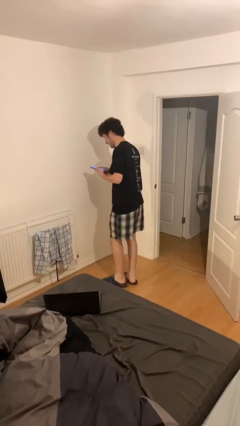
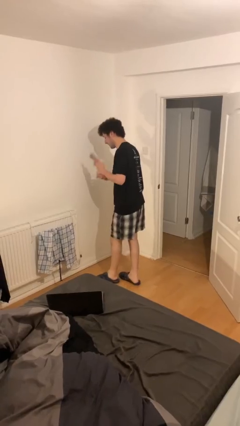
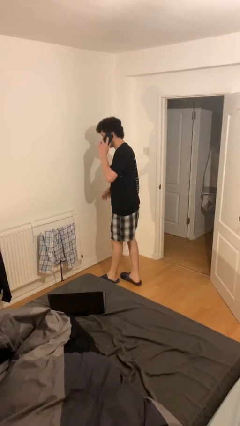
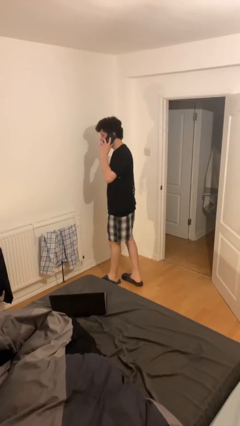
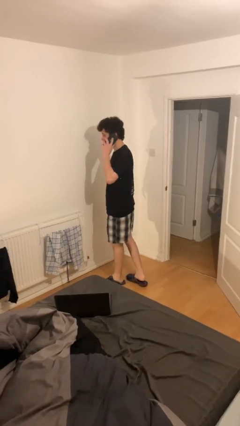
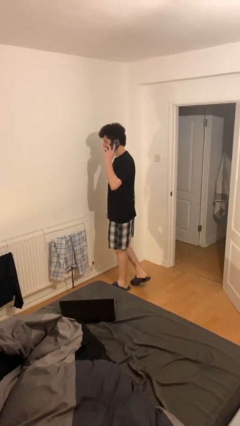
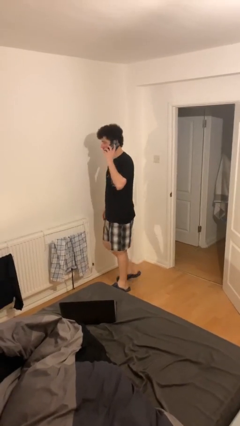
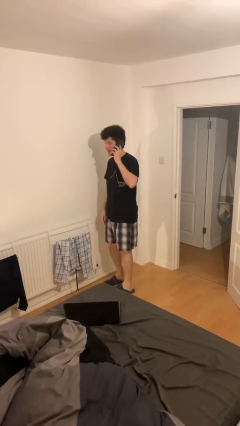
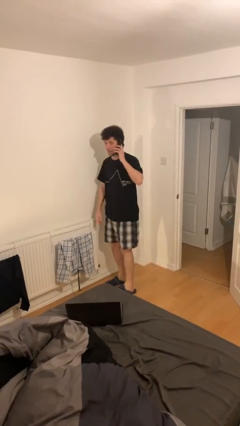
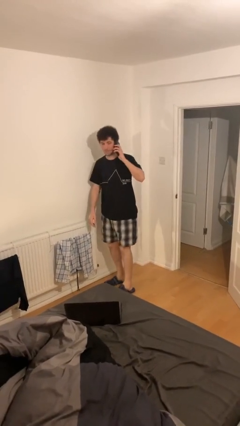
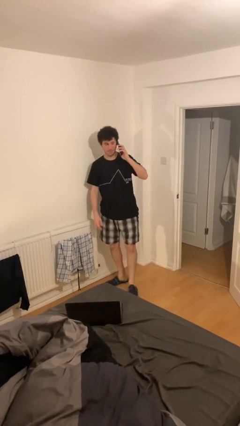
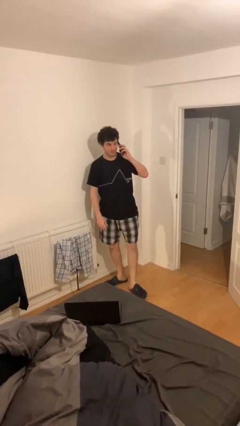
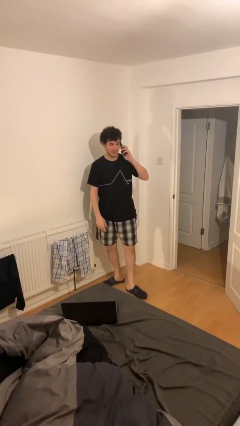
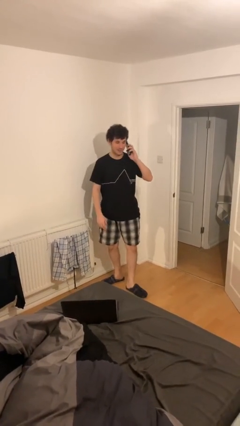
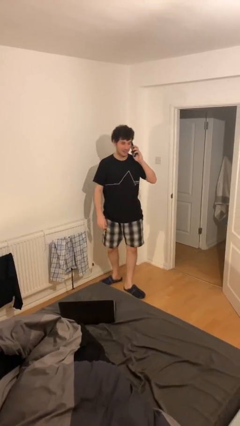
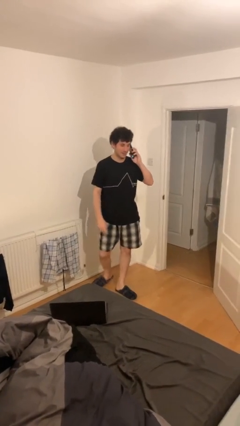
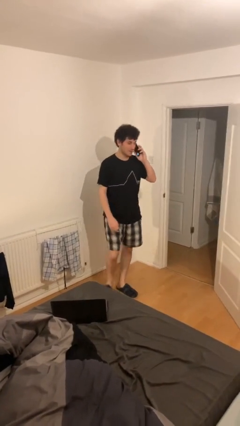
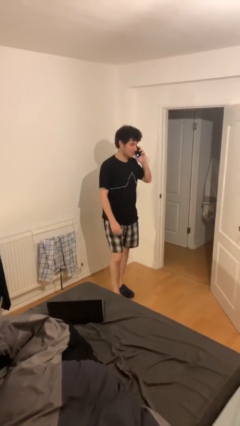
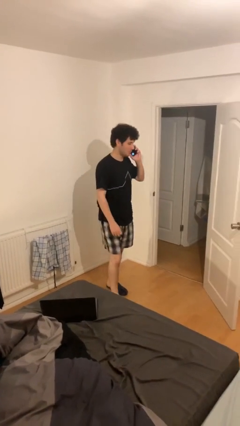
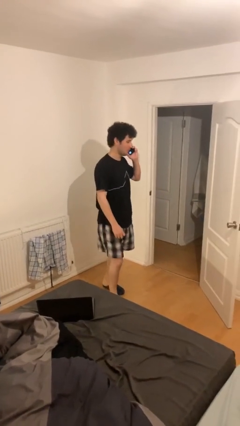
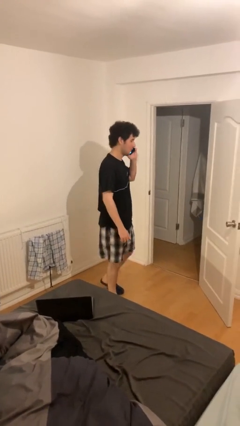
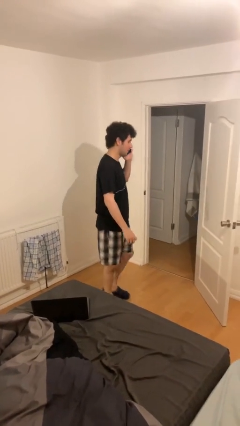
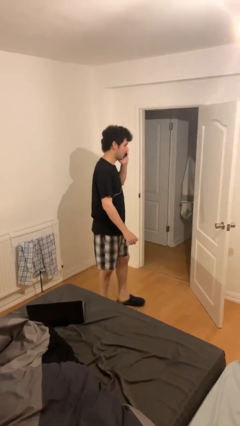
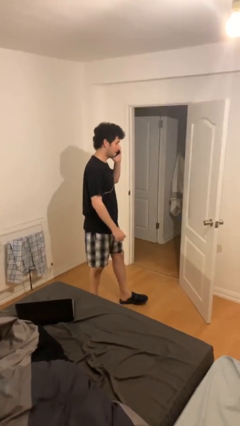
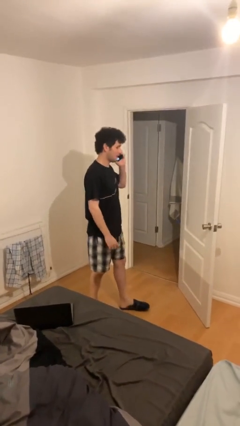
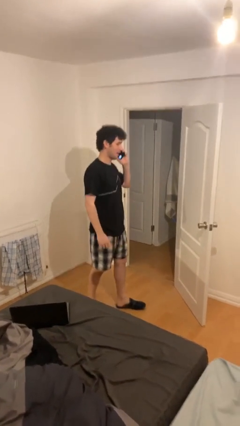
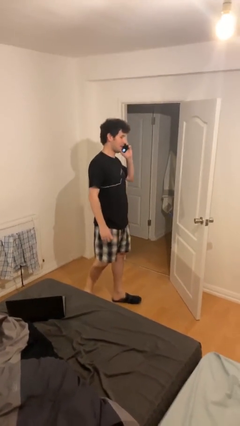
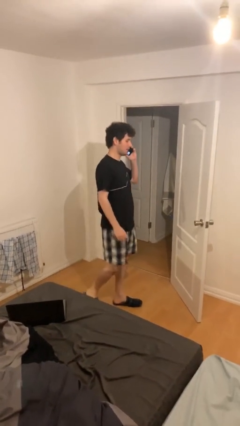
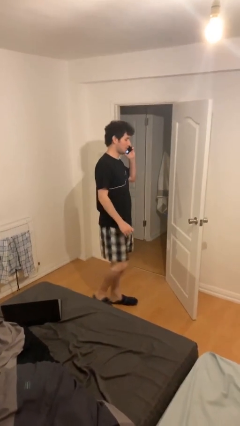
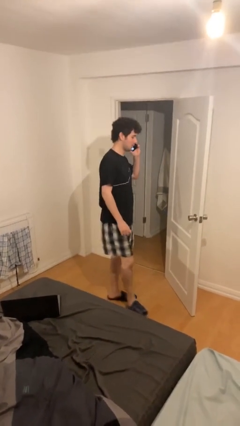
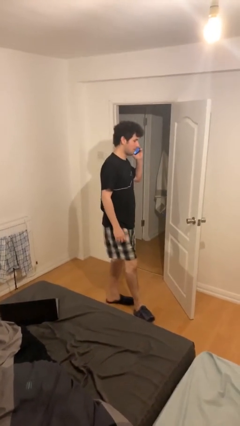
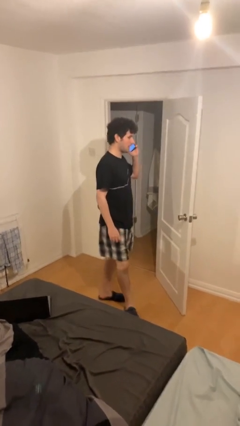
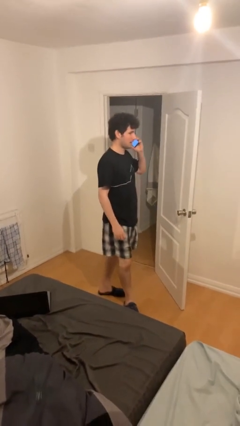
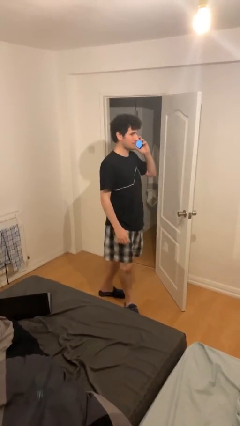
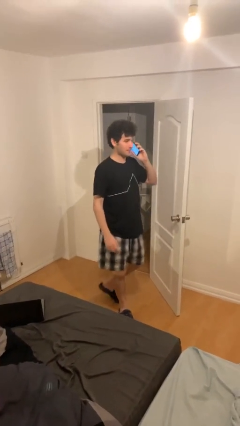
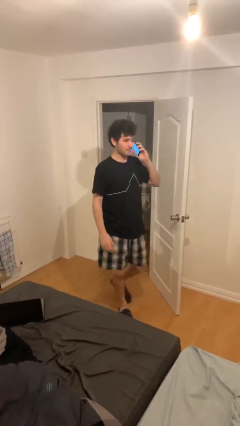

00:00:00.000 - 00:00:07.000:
person talks on phone

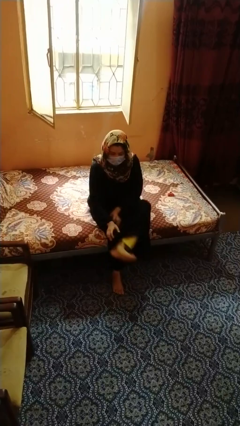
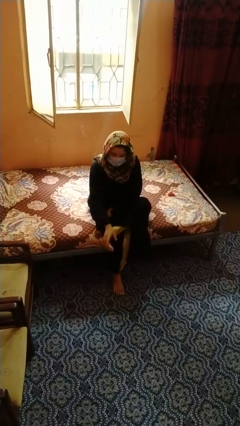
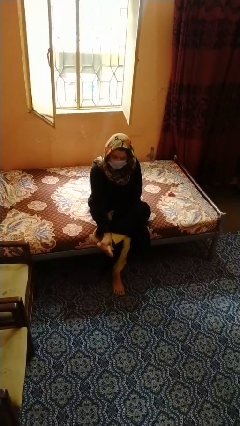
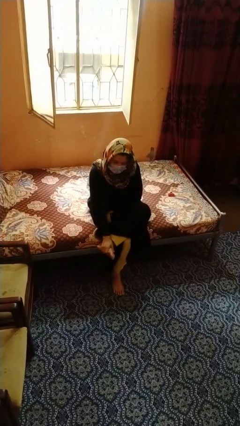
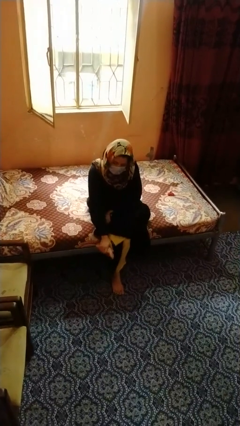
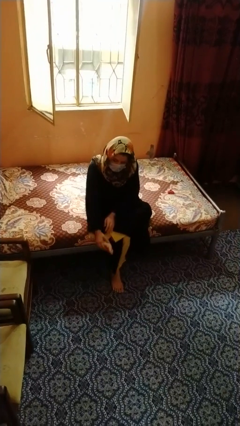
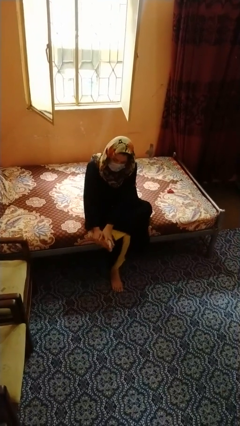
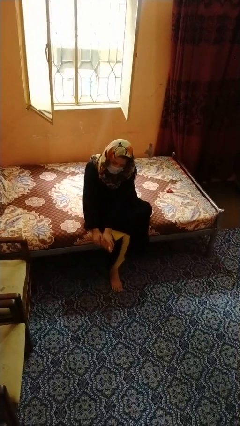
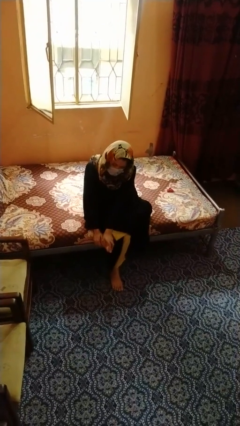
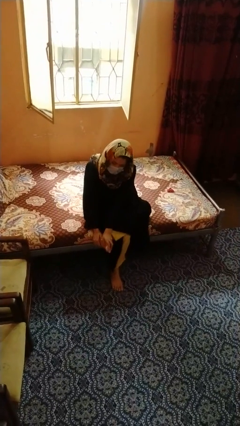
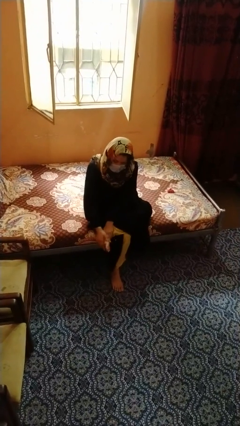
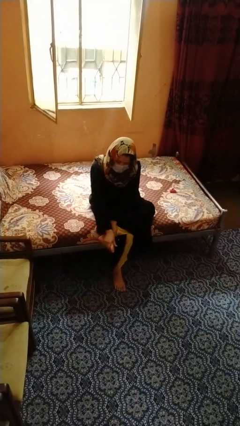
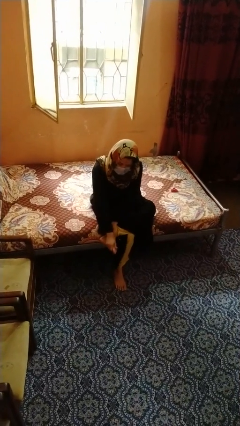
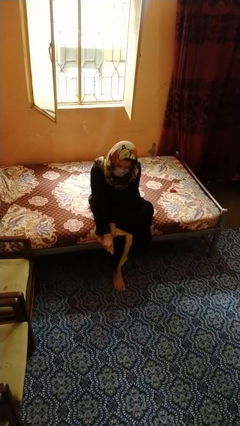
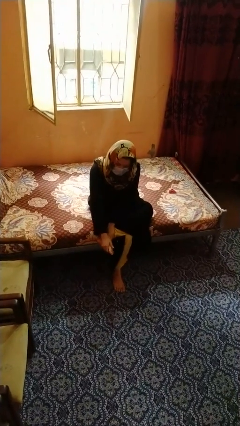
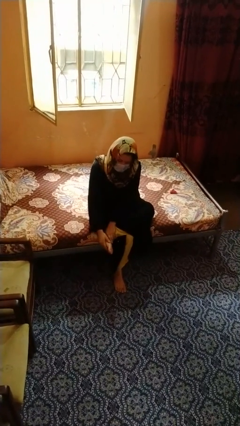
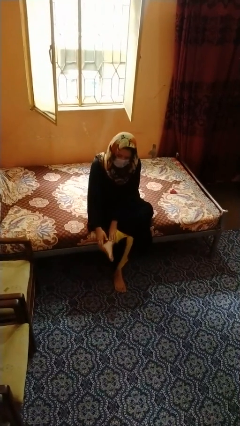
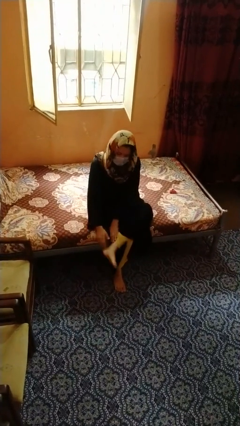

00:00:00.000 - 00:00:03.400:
person rubs foot

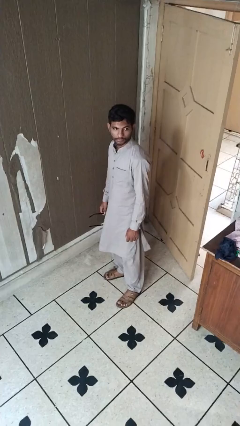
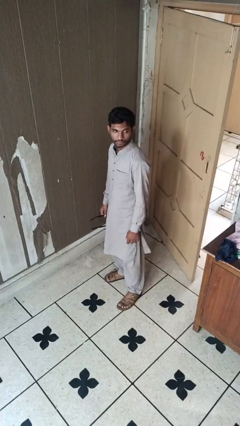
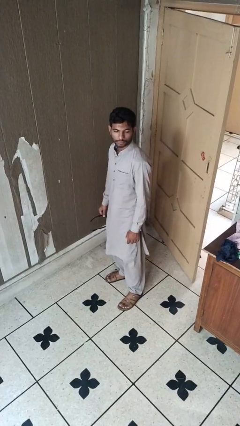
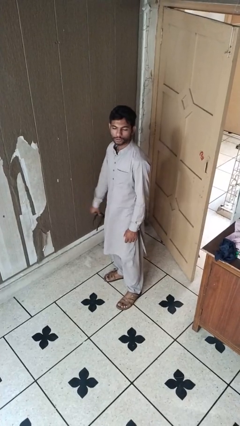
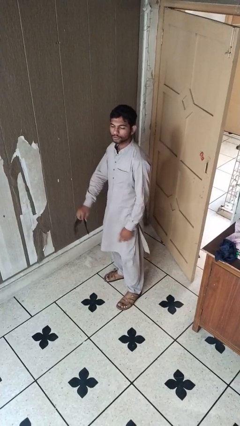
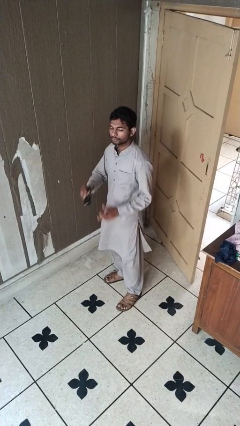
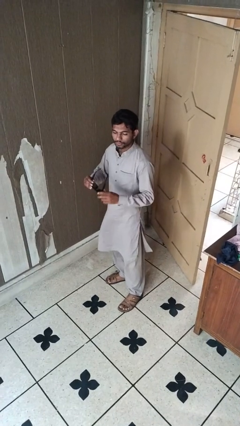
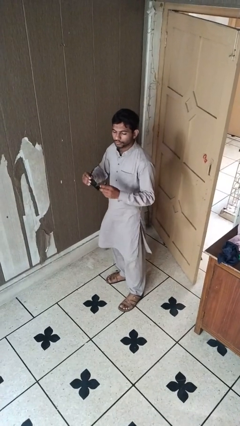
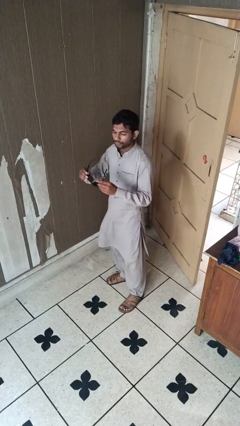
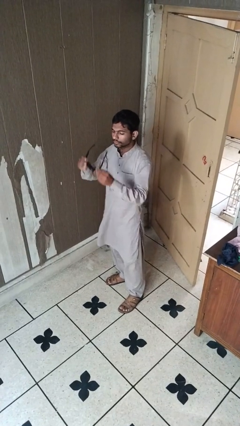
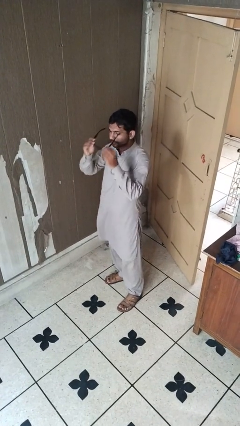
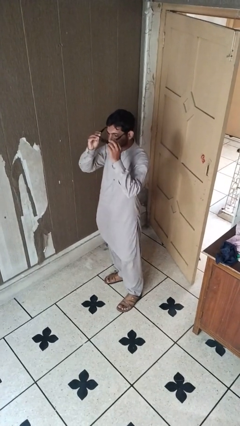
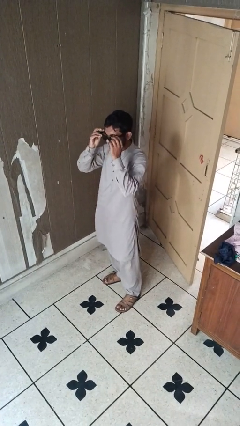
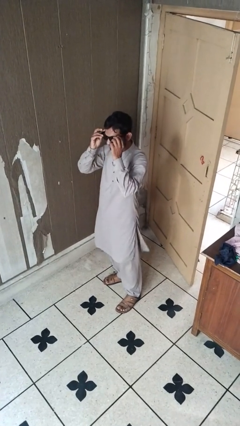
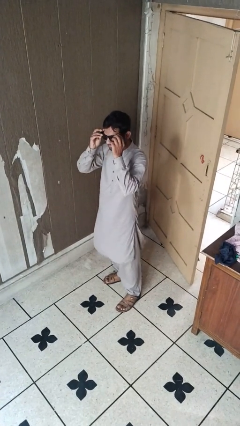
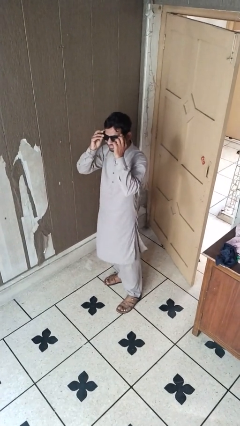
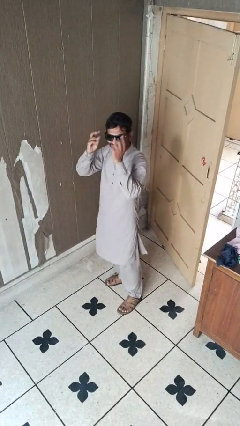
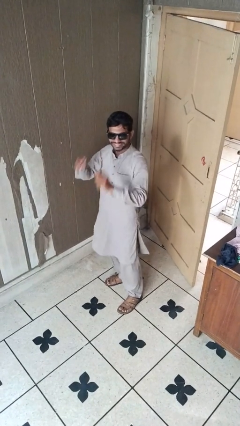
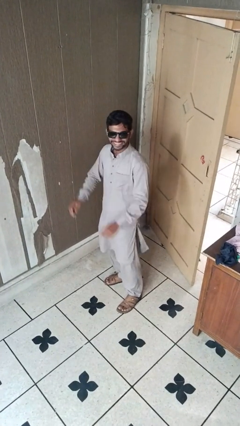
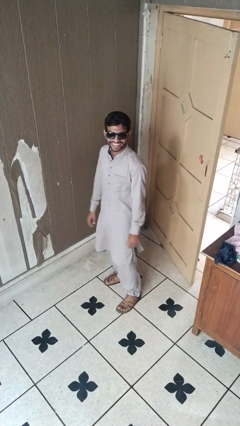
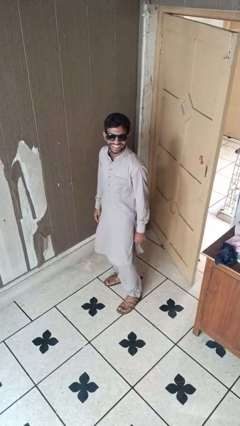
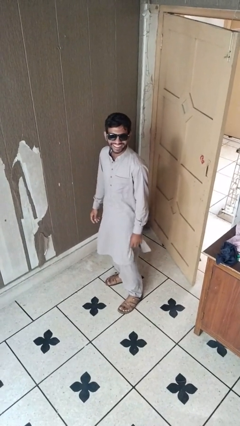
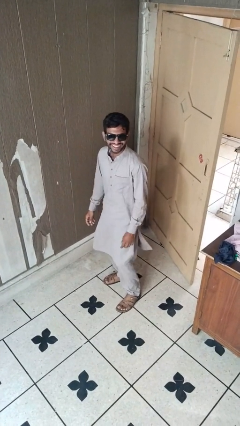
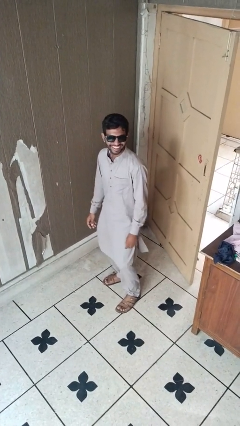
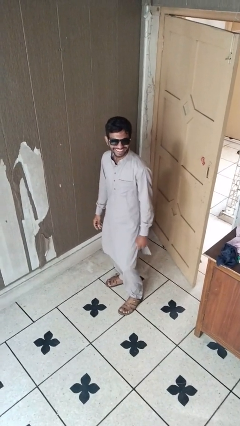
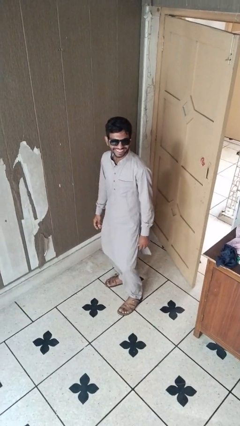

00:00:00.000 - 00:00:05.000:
person puts on sunglasses

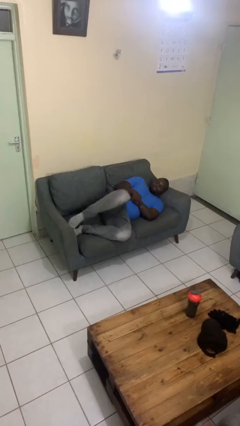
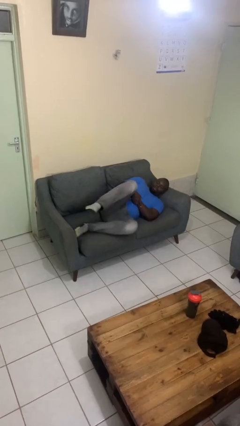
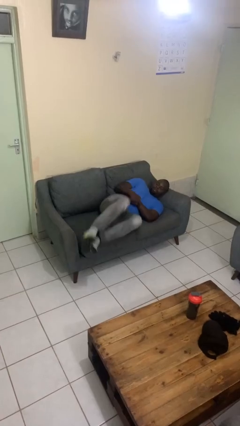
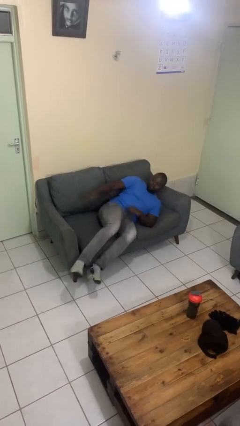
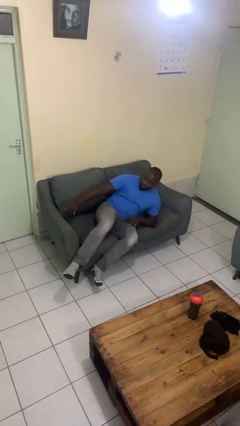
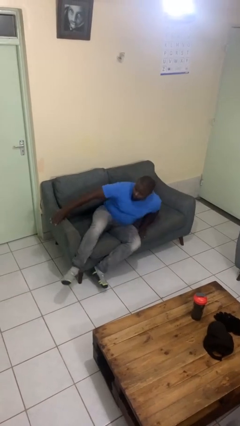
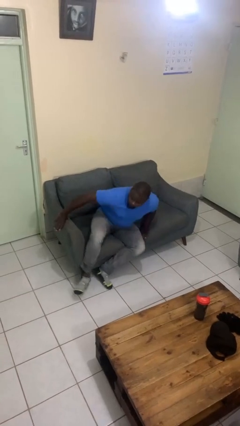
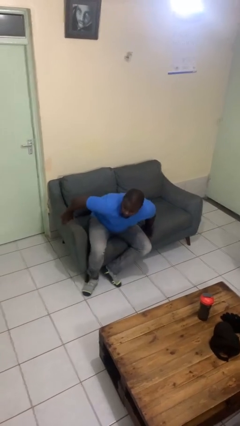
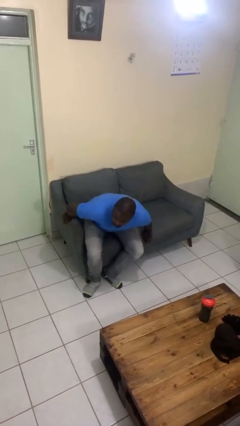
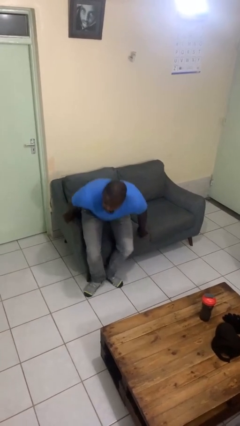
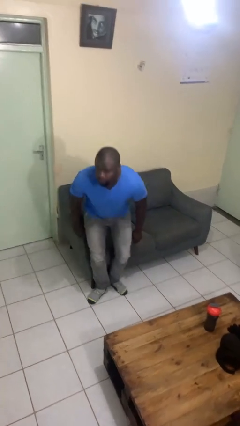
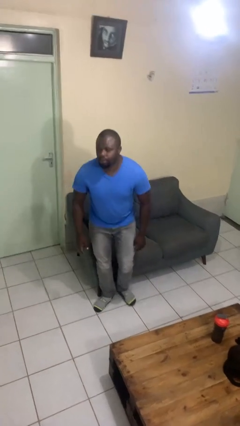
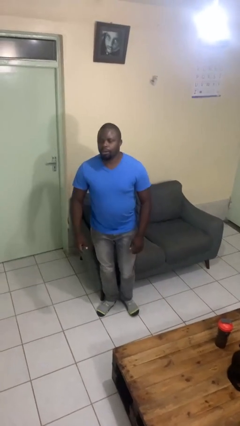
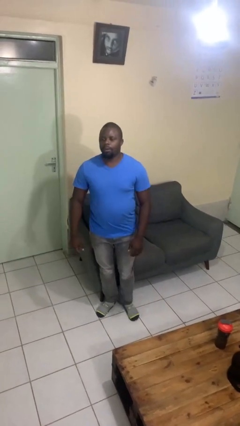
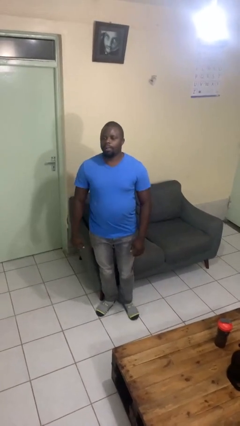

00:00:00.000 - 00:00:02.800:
person stands up
